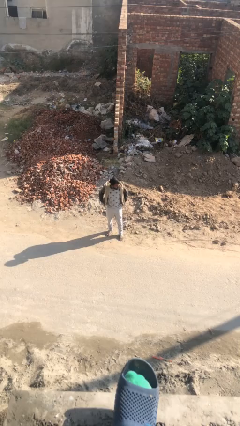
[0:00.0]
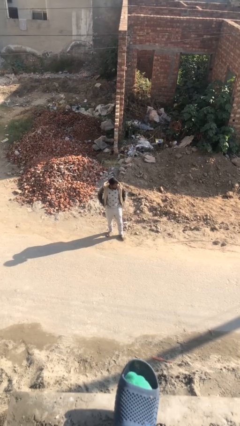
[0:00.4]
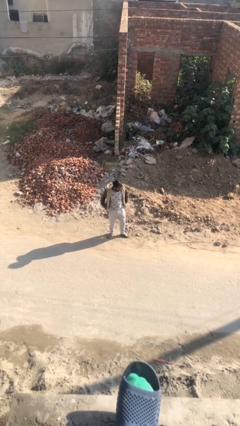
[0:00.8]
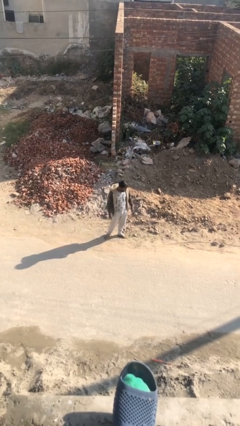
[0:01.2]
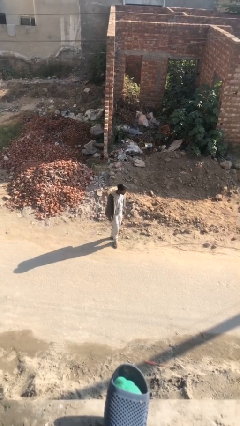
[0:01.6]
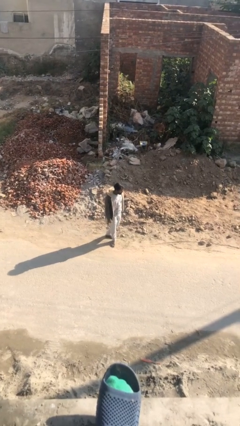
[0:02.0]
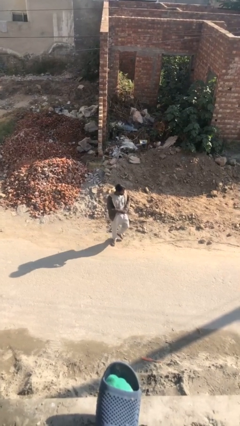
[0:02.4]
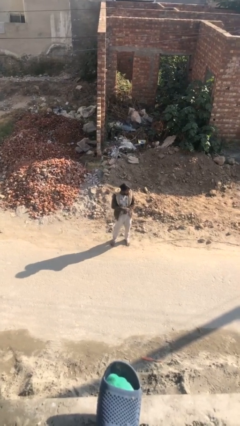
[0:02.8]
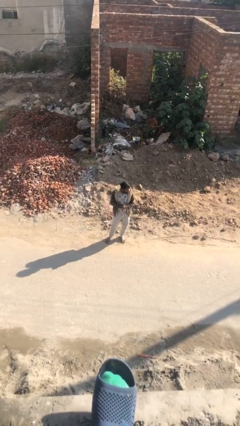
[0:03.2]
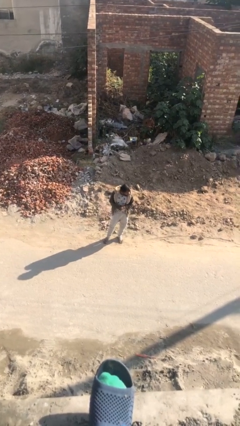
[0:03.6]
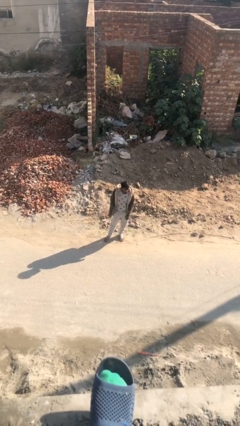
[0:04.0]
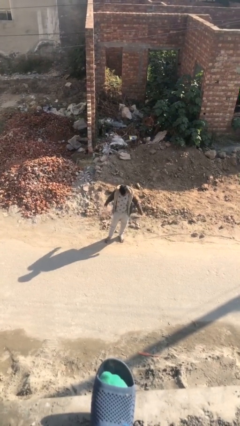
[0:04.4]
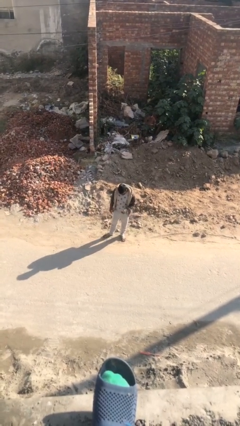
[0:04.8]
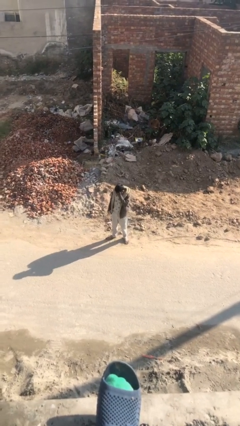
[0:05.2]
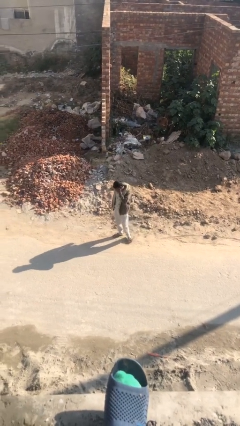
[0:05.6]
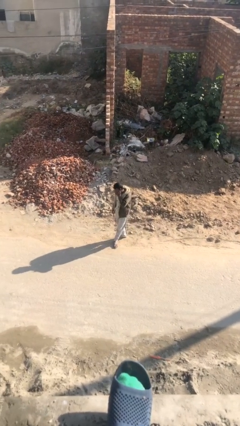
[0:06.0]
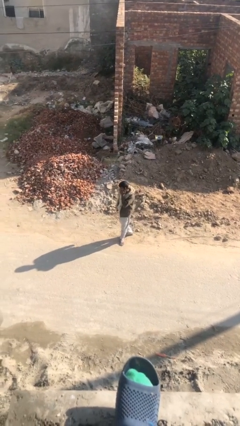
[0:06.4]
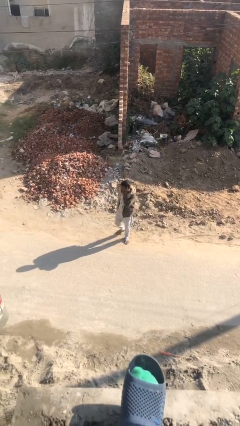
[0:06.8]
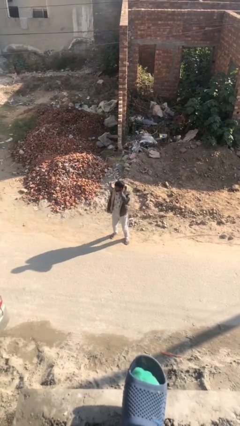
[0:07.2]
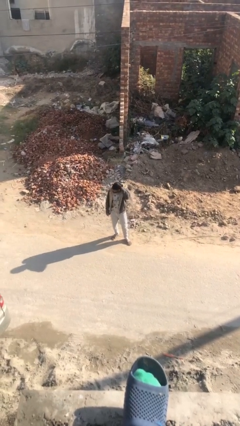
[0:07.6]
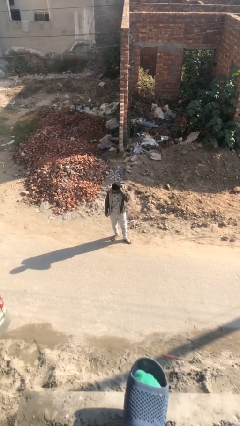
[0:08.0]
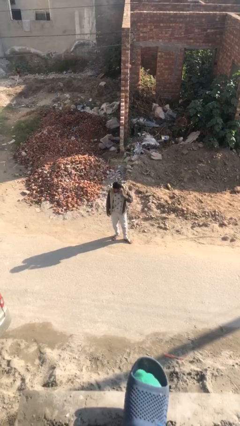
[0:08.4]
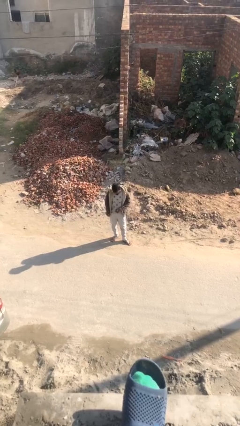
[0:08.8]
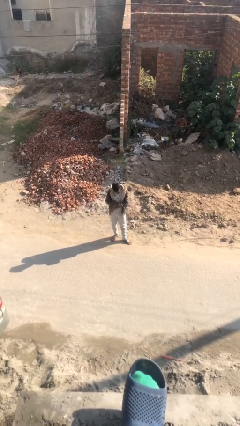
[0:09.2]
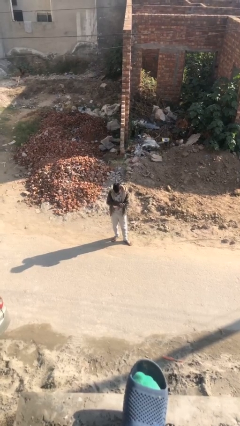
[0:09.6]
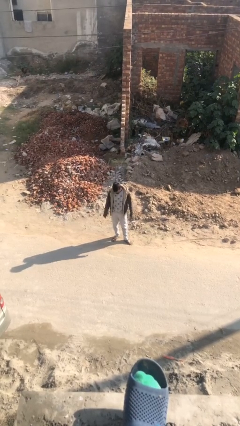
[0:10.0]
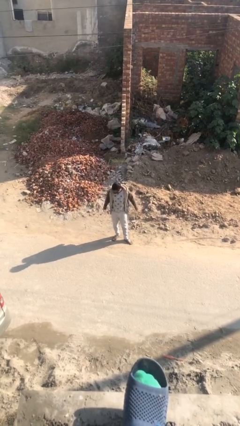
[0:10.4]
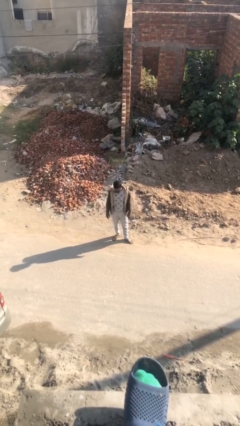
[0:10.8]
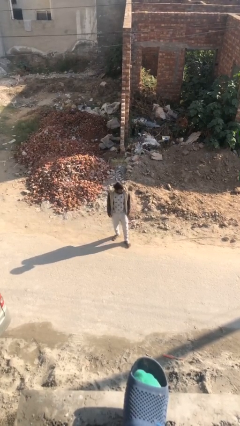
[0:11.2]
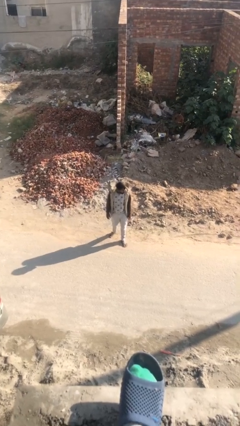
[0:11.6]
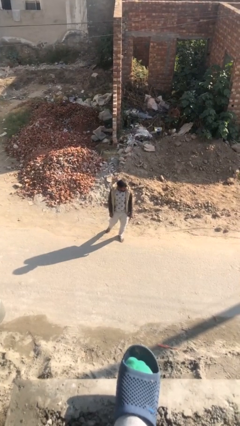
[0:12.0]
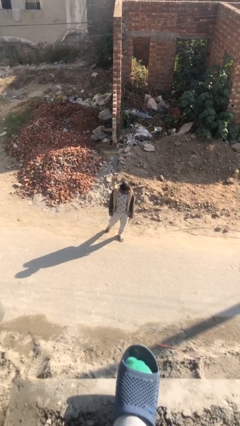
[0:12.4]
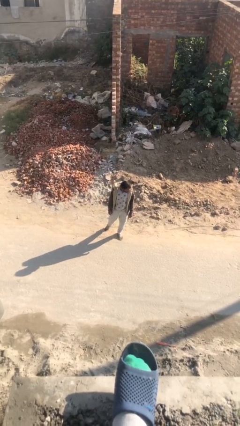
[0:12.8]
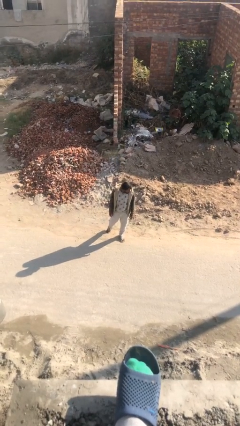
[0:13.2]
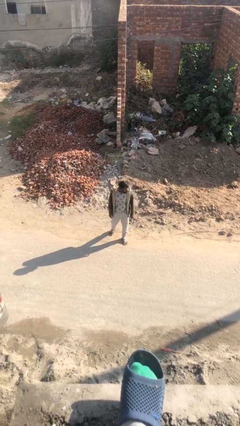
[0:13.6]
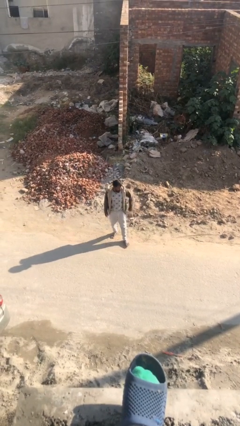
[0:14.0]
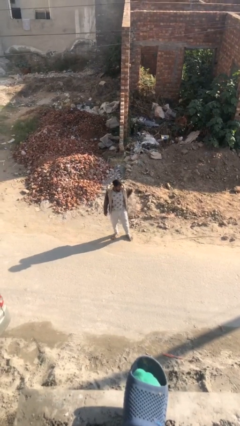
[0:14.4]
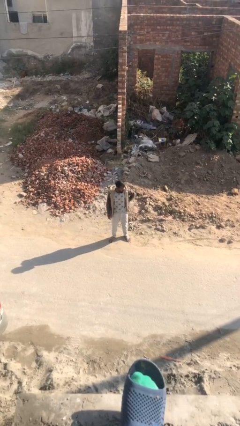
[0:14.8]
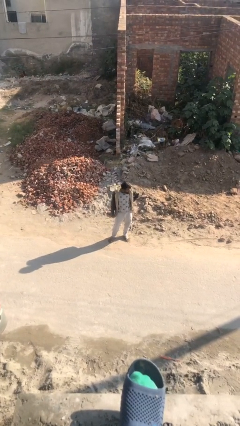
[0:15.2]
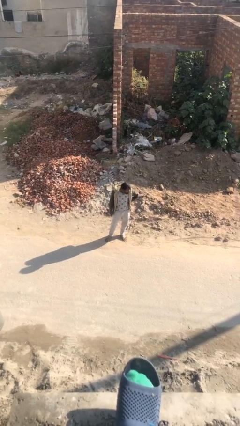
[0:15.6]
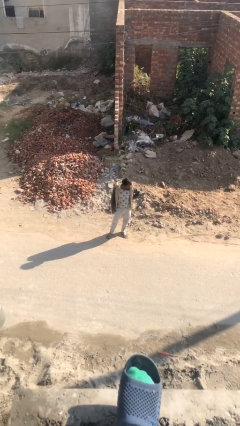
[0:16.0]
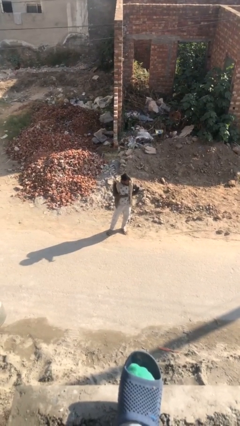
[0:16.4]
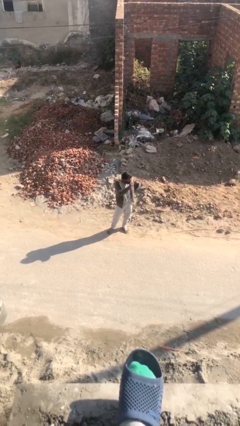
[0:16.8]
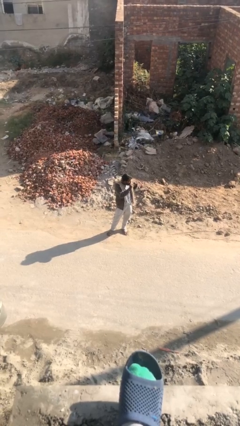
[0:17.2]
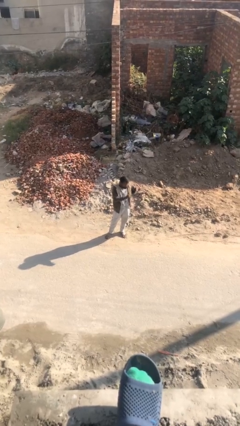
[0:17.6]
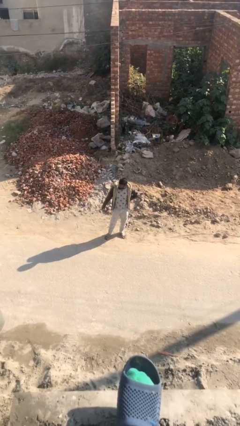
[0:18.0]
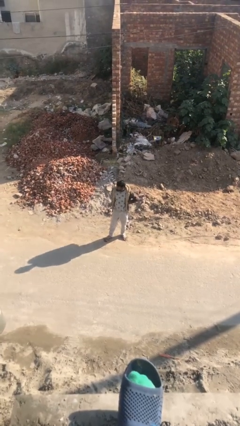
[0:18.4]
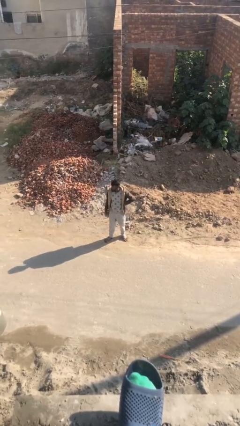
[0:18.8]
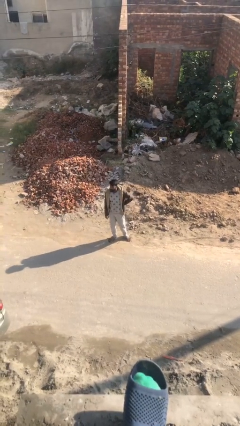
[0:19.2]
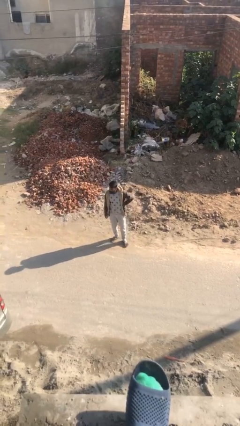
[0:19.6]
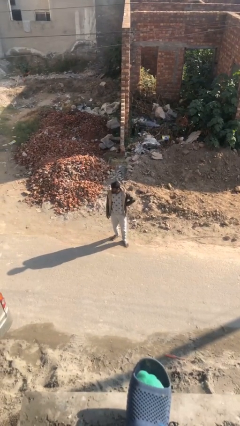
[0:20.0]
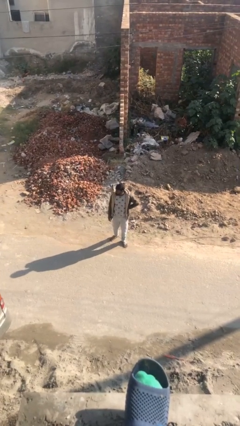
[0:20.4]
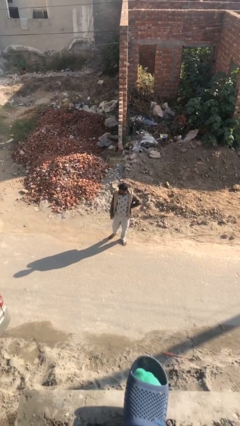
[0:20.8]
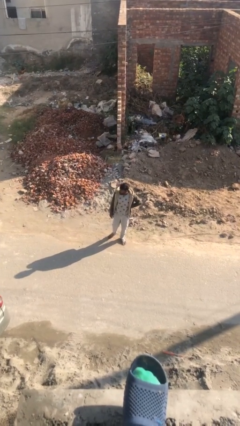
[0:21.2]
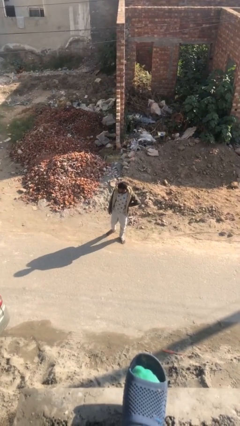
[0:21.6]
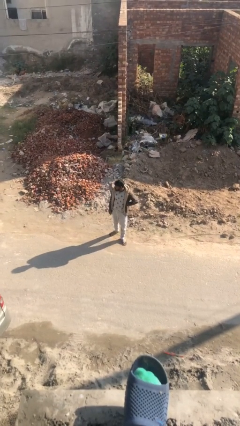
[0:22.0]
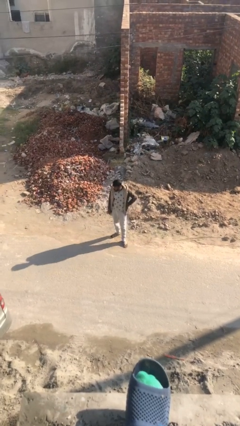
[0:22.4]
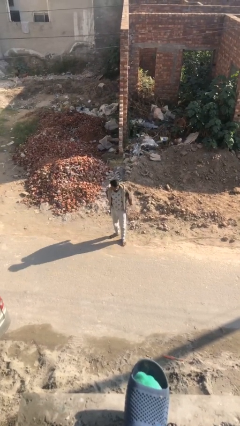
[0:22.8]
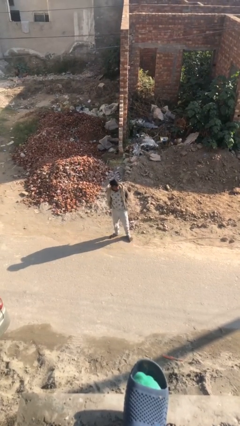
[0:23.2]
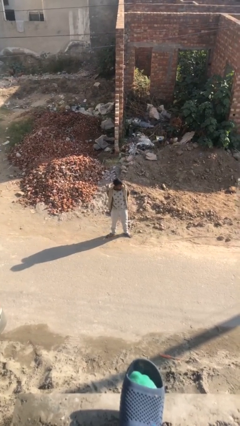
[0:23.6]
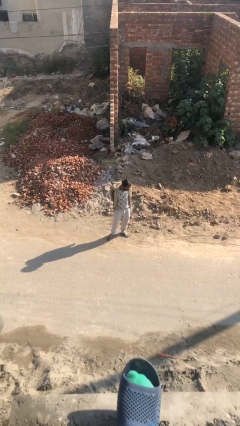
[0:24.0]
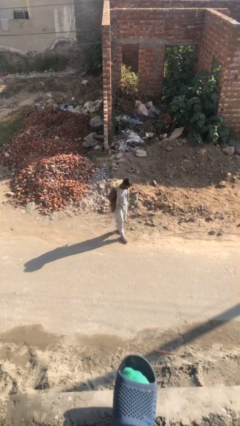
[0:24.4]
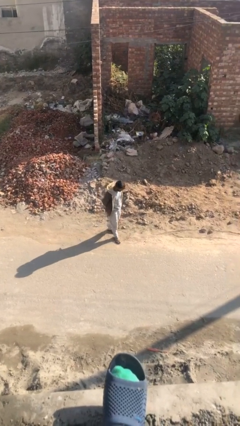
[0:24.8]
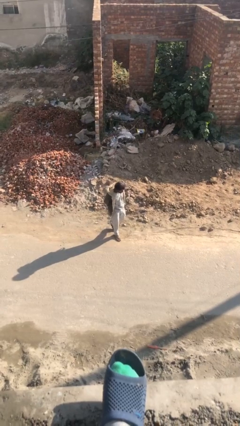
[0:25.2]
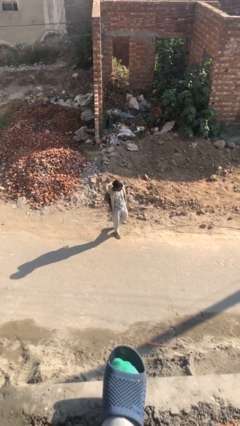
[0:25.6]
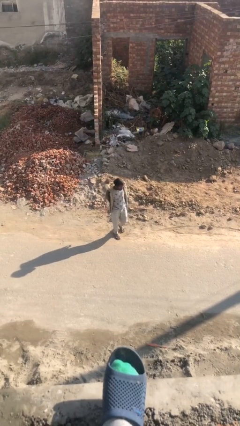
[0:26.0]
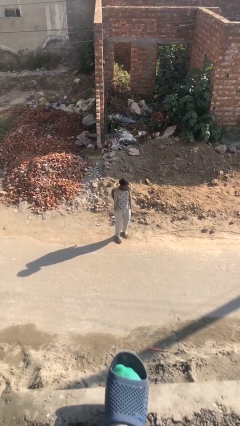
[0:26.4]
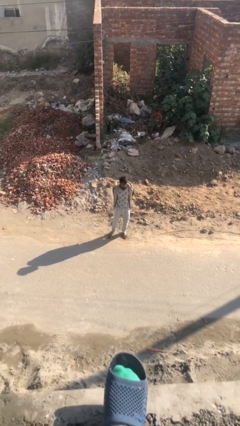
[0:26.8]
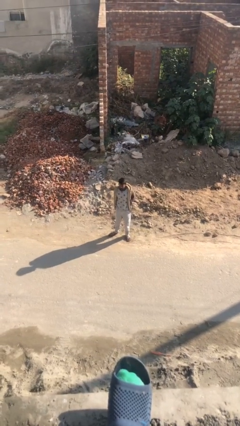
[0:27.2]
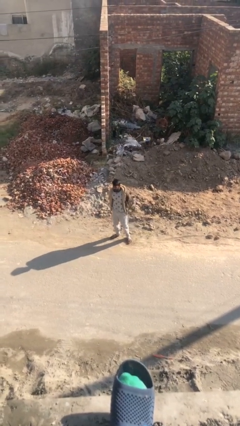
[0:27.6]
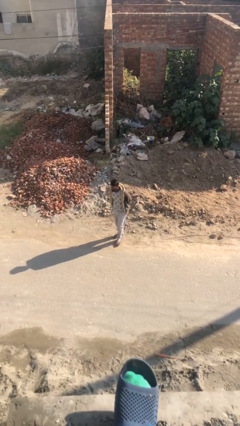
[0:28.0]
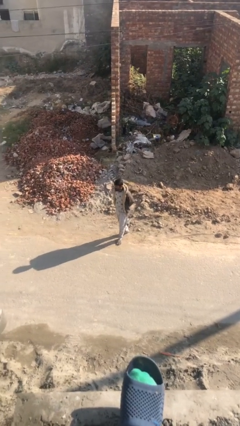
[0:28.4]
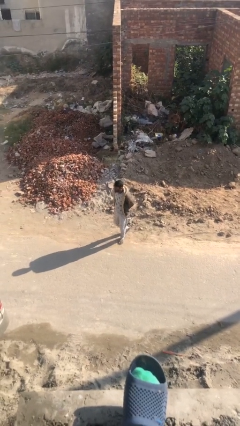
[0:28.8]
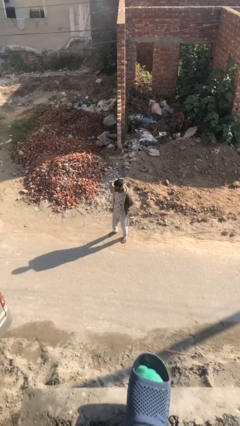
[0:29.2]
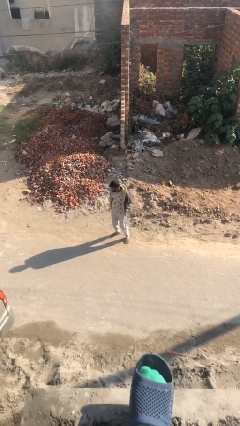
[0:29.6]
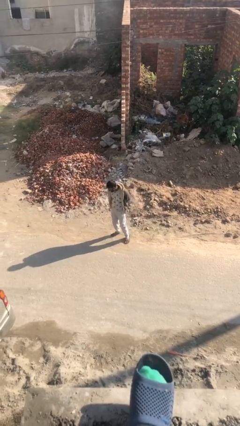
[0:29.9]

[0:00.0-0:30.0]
person walks

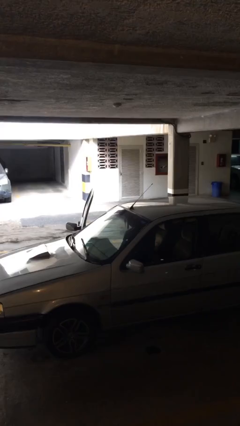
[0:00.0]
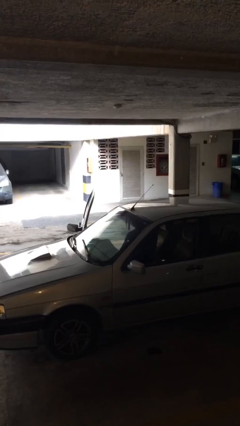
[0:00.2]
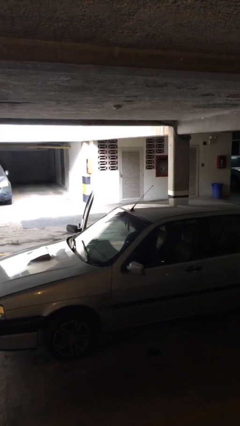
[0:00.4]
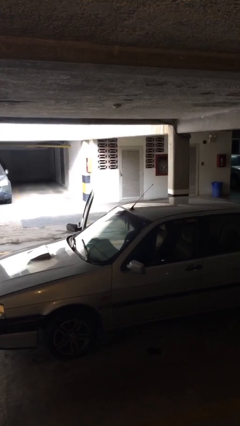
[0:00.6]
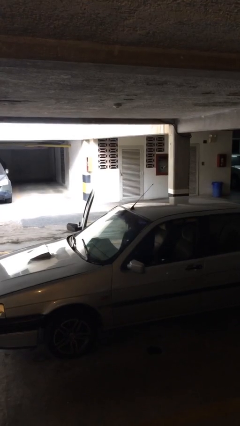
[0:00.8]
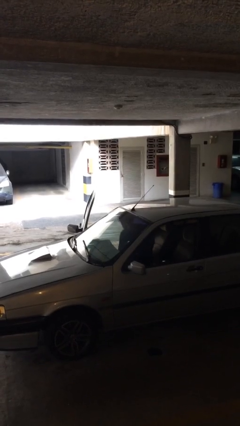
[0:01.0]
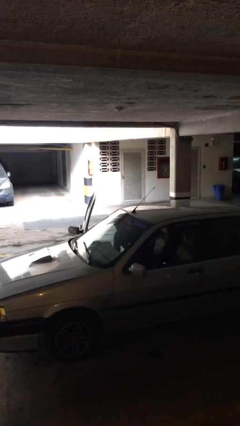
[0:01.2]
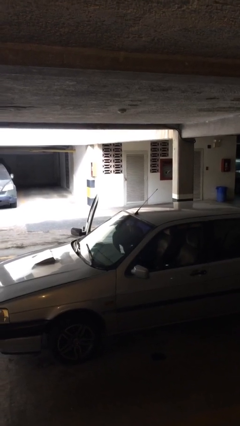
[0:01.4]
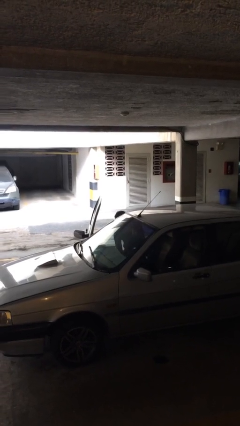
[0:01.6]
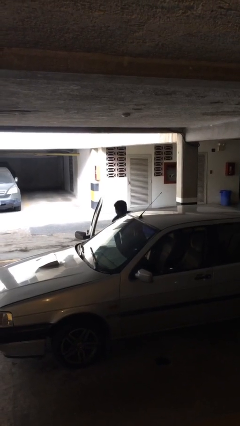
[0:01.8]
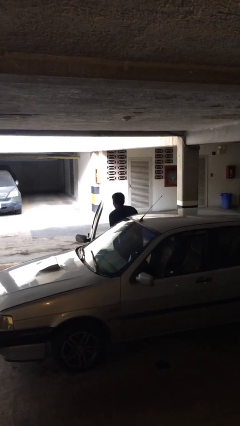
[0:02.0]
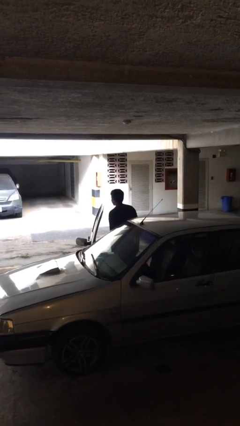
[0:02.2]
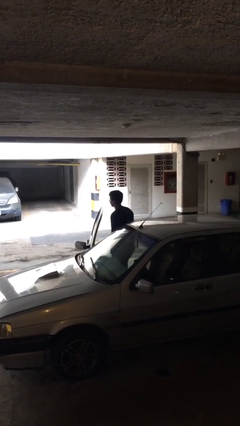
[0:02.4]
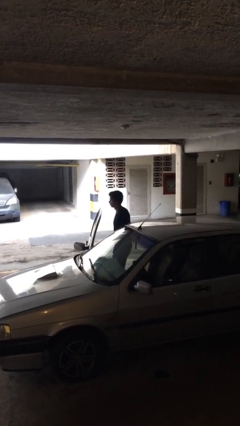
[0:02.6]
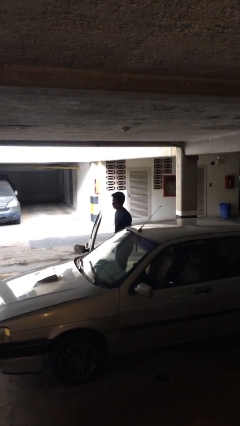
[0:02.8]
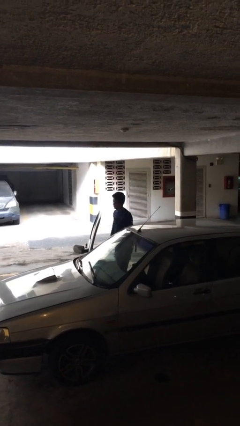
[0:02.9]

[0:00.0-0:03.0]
person exits car

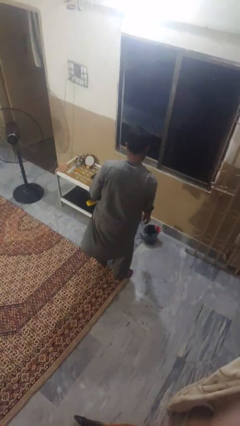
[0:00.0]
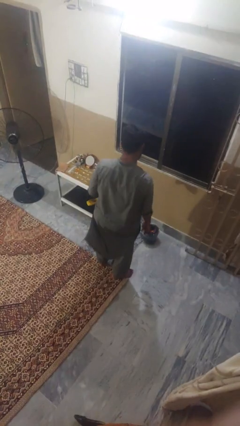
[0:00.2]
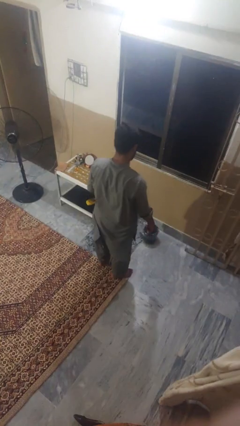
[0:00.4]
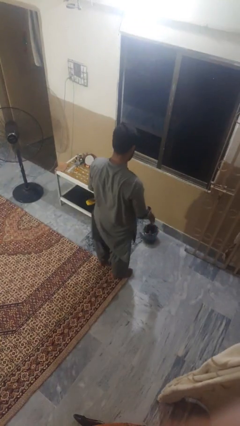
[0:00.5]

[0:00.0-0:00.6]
person discards trash
